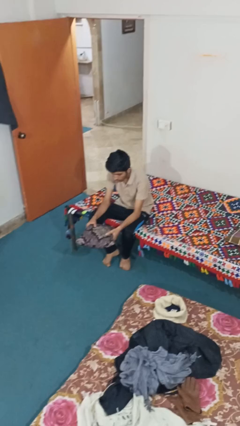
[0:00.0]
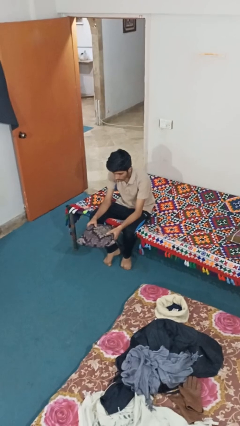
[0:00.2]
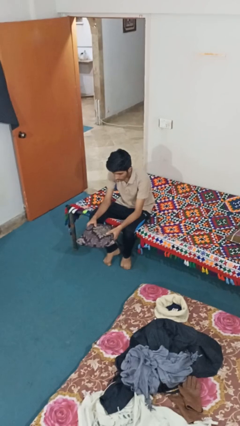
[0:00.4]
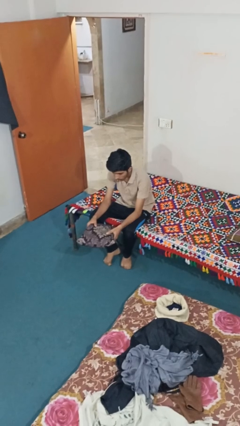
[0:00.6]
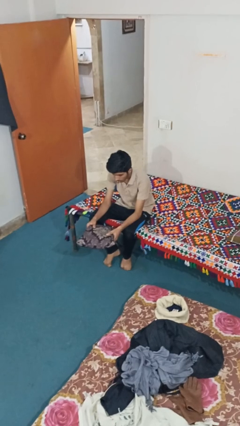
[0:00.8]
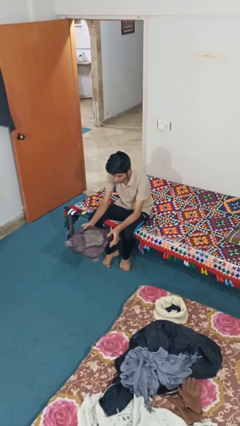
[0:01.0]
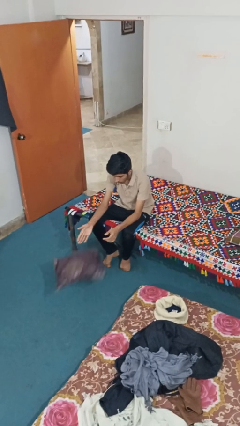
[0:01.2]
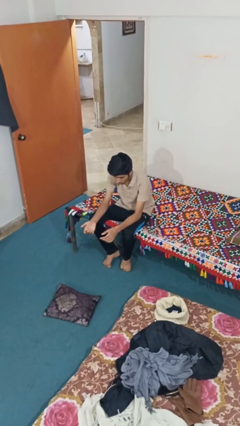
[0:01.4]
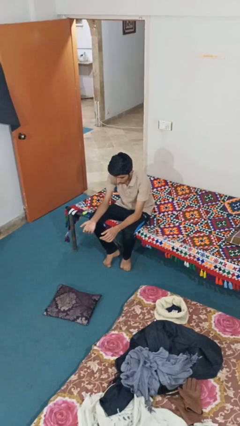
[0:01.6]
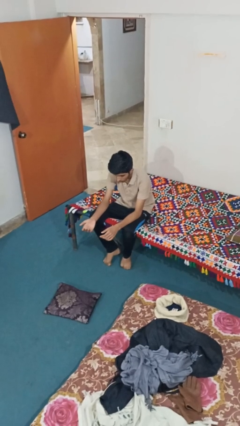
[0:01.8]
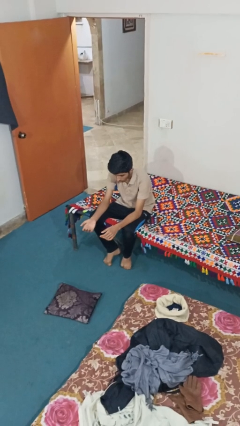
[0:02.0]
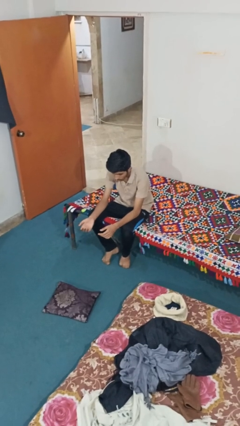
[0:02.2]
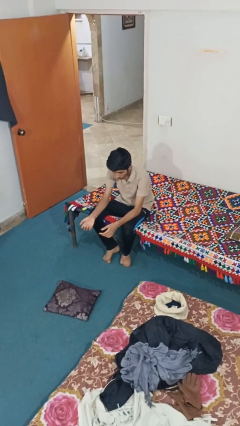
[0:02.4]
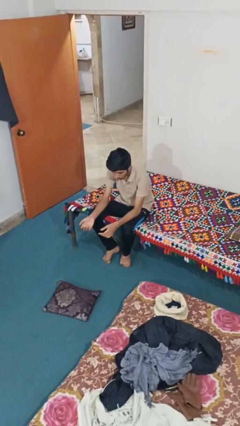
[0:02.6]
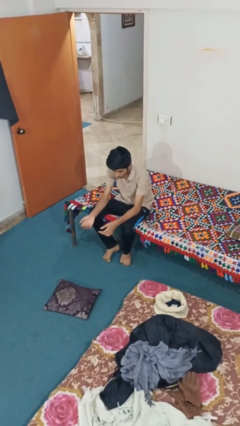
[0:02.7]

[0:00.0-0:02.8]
person drops object

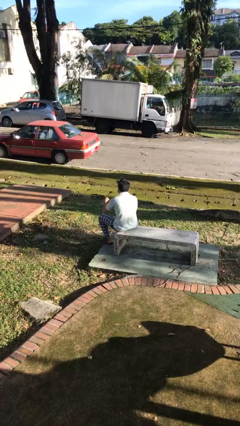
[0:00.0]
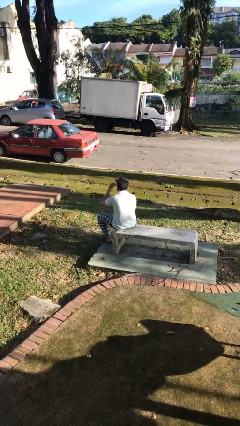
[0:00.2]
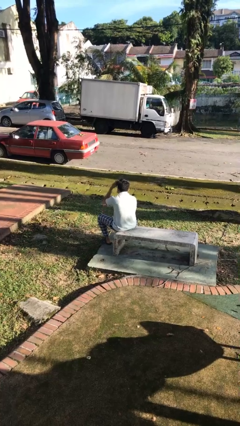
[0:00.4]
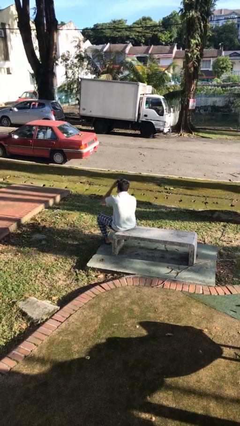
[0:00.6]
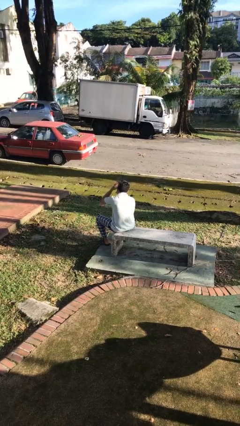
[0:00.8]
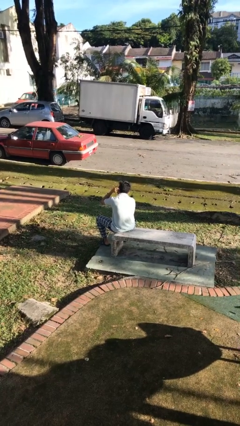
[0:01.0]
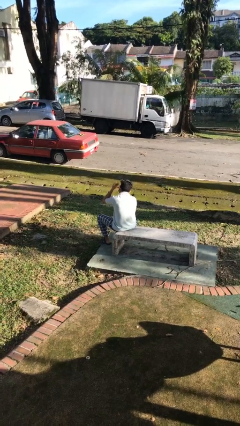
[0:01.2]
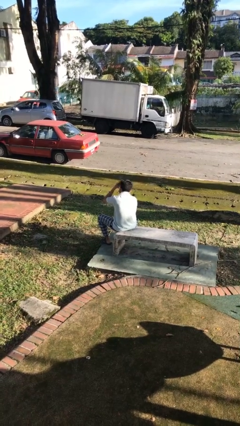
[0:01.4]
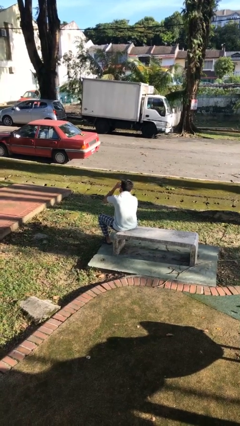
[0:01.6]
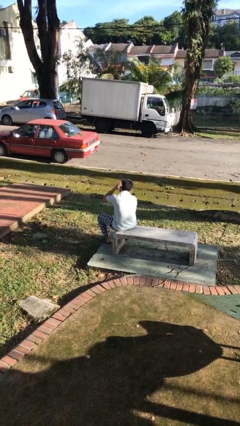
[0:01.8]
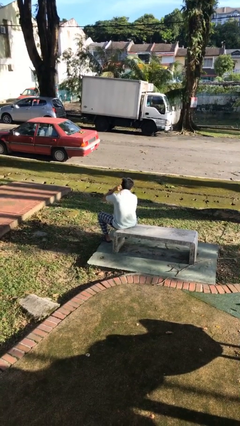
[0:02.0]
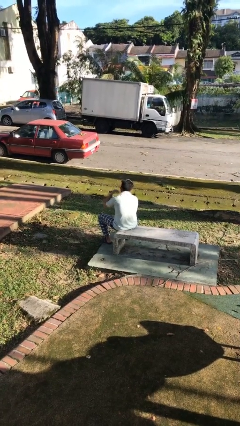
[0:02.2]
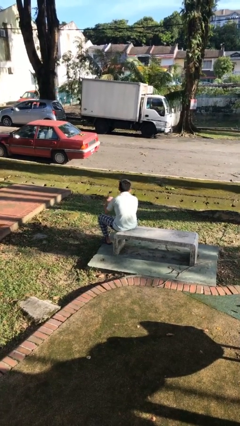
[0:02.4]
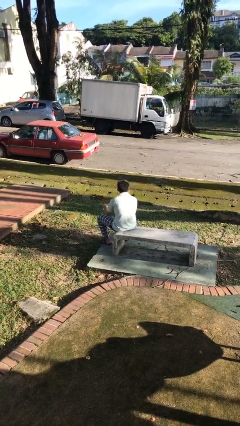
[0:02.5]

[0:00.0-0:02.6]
person strokes hair

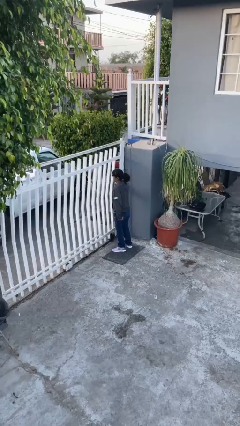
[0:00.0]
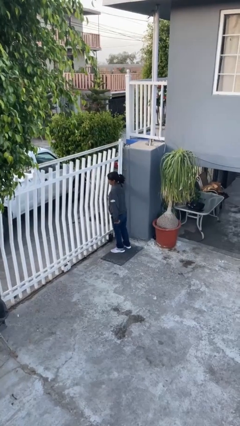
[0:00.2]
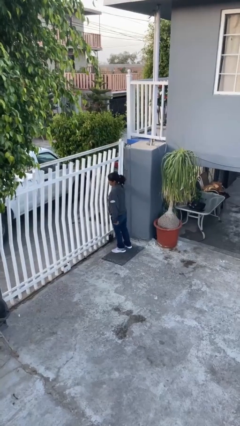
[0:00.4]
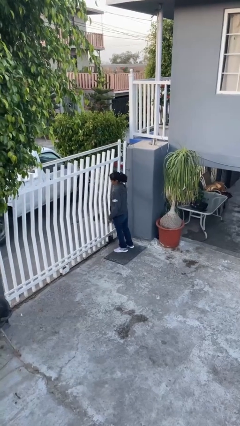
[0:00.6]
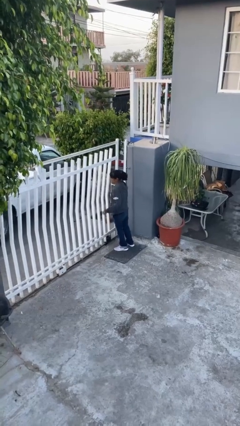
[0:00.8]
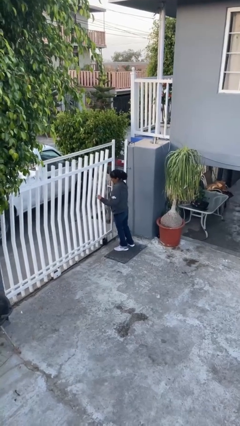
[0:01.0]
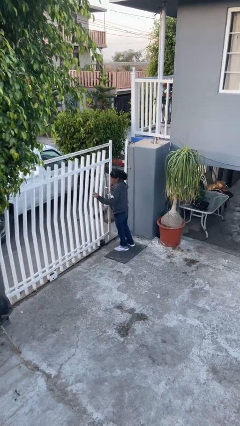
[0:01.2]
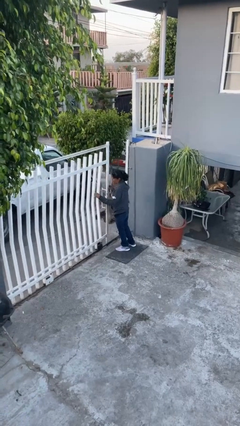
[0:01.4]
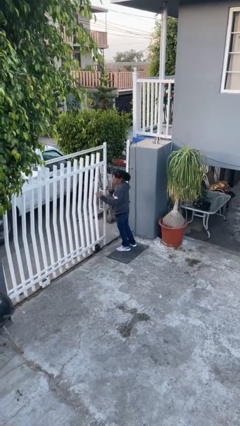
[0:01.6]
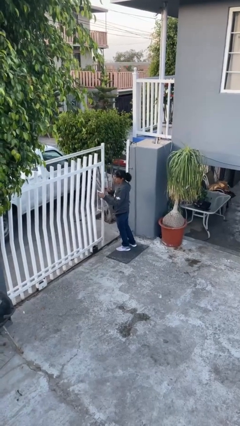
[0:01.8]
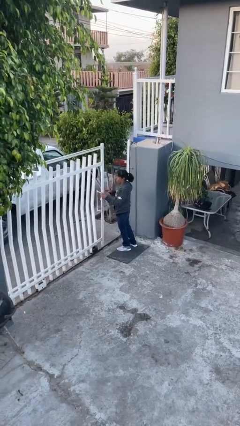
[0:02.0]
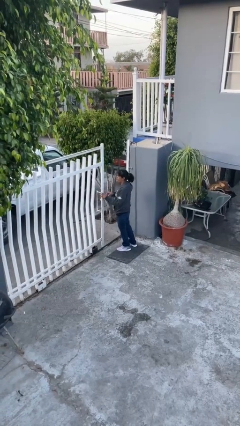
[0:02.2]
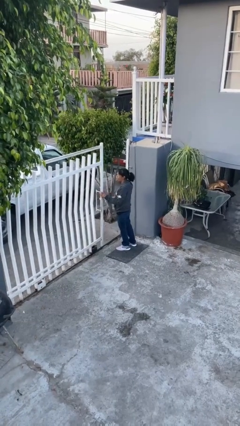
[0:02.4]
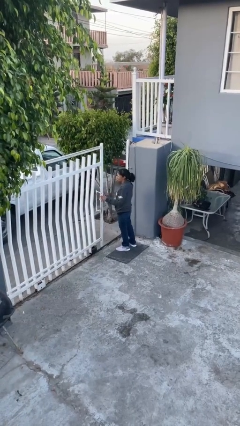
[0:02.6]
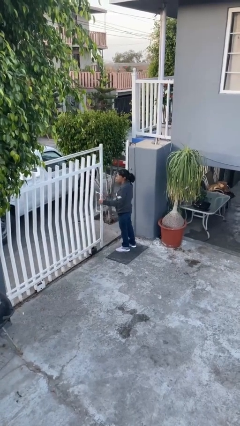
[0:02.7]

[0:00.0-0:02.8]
person closes facility door

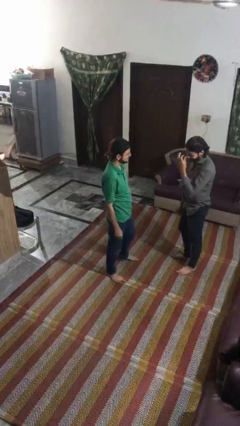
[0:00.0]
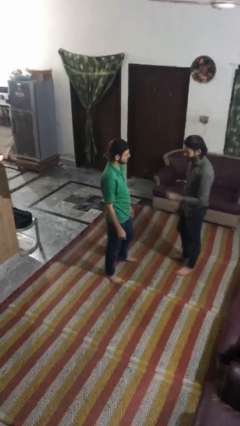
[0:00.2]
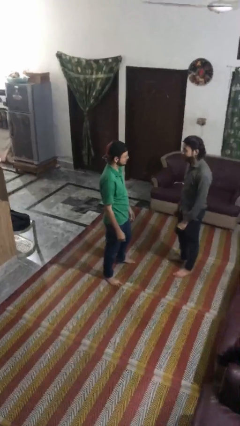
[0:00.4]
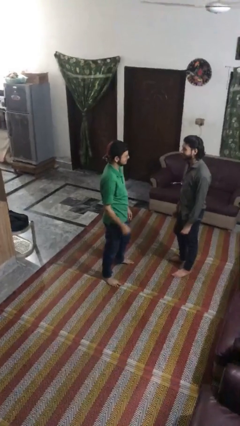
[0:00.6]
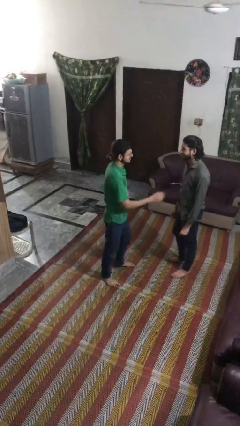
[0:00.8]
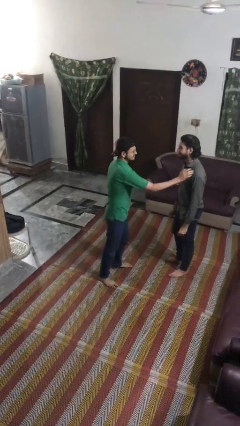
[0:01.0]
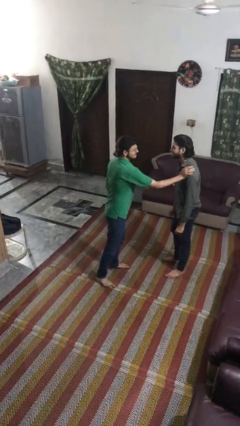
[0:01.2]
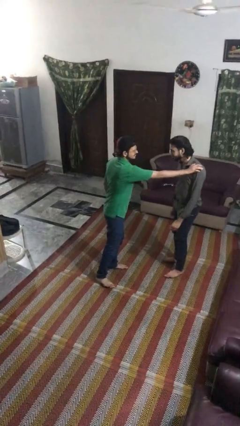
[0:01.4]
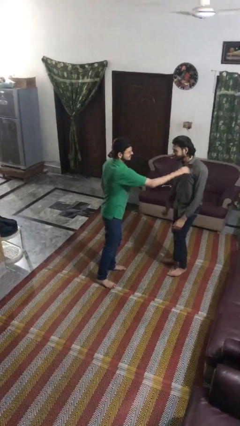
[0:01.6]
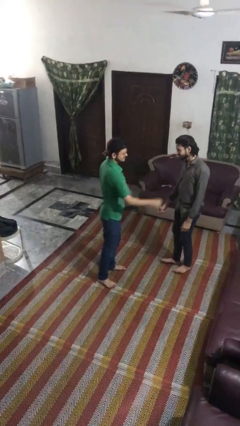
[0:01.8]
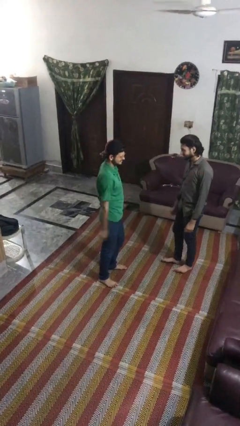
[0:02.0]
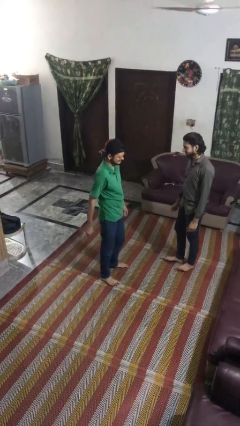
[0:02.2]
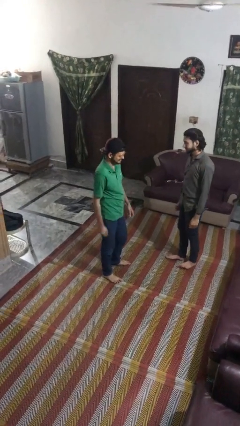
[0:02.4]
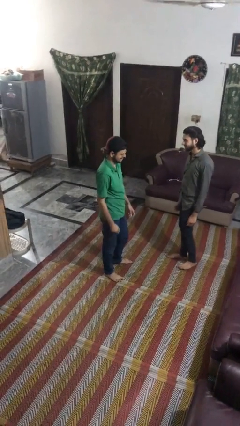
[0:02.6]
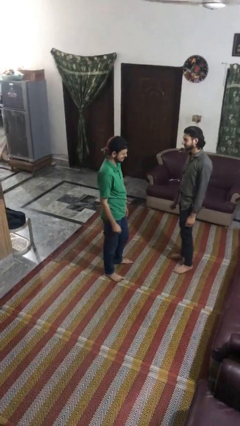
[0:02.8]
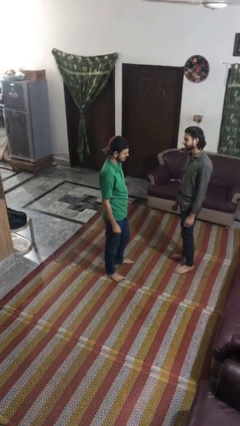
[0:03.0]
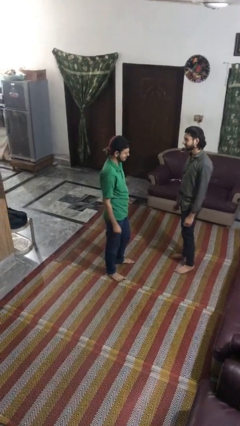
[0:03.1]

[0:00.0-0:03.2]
person shoves person

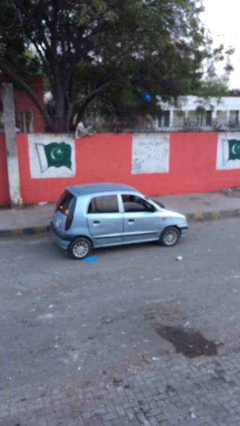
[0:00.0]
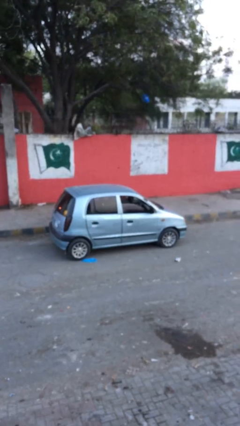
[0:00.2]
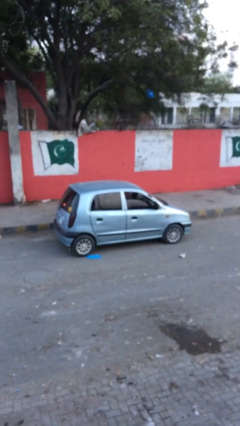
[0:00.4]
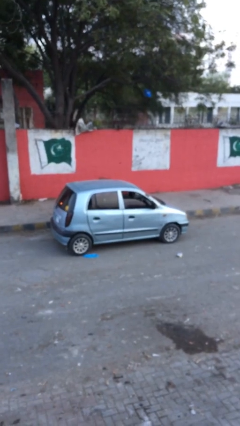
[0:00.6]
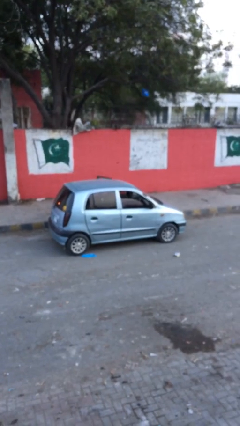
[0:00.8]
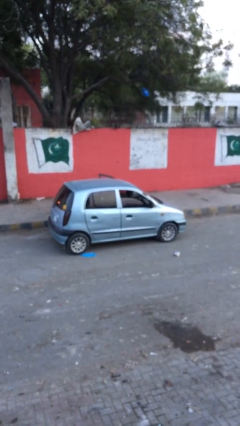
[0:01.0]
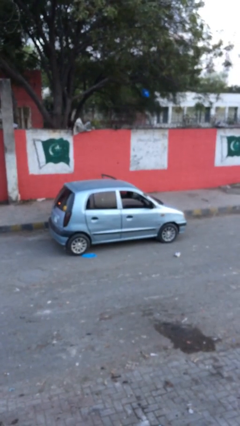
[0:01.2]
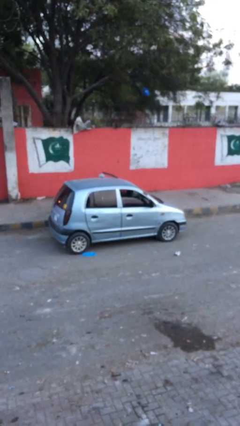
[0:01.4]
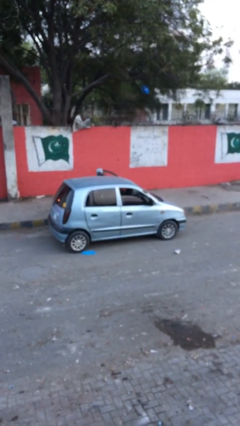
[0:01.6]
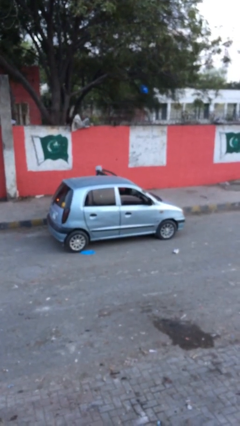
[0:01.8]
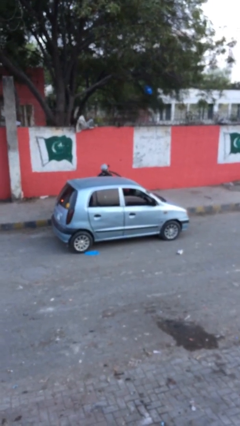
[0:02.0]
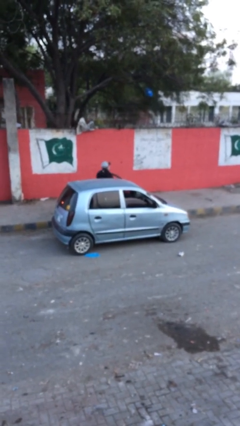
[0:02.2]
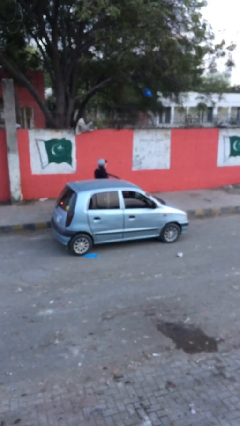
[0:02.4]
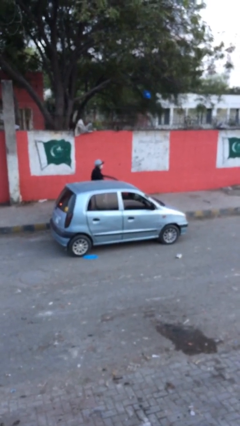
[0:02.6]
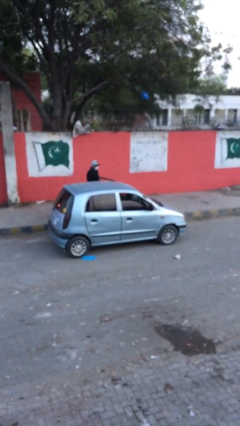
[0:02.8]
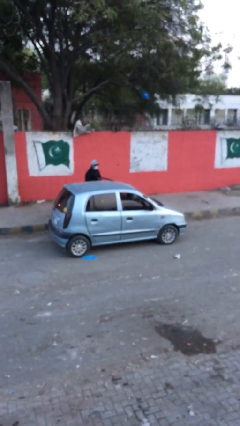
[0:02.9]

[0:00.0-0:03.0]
car drops off person

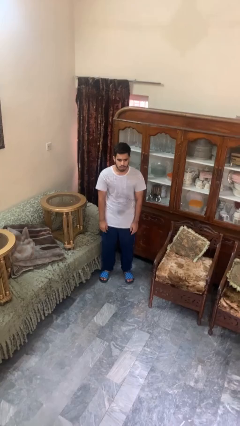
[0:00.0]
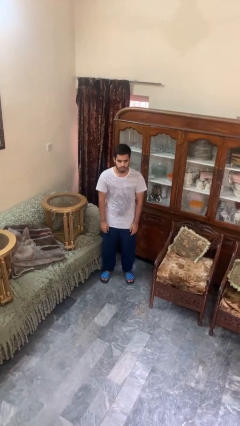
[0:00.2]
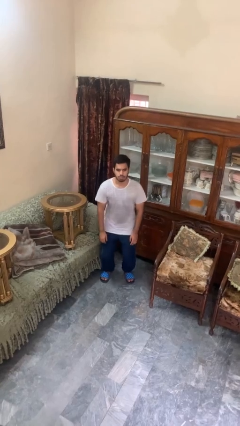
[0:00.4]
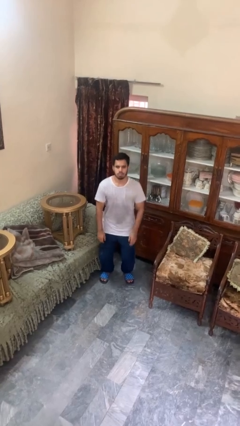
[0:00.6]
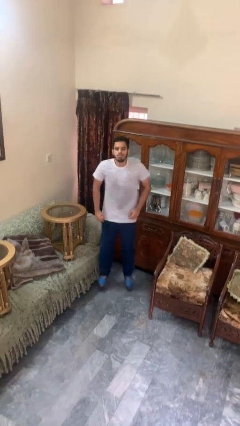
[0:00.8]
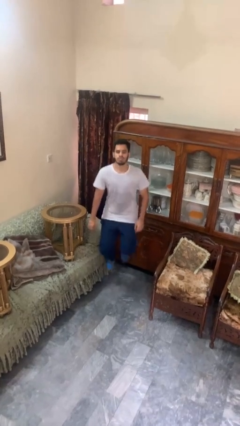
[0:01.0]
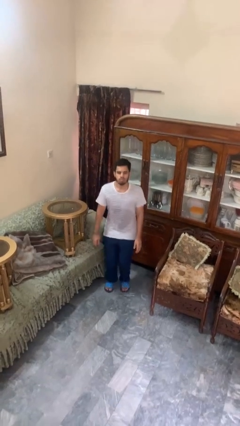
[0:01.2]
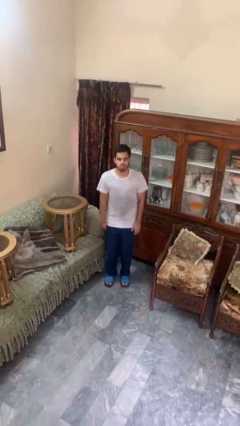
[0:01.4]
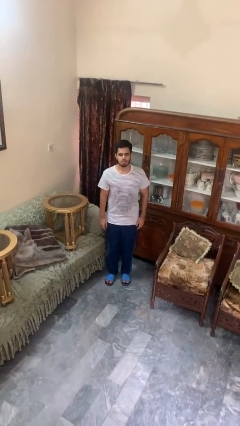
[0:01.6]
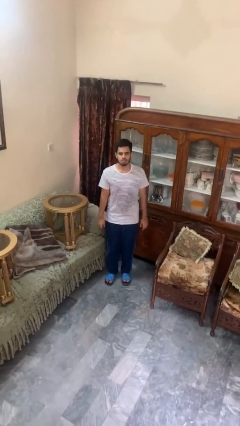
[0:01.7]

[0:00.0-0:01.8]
person jumps

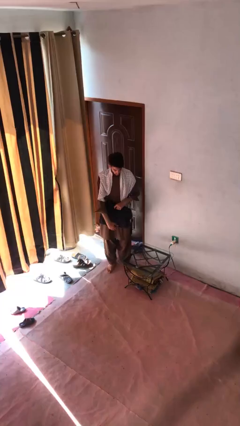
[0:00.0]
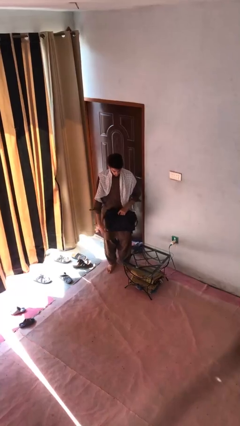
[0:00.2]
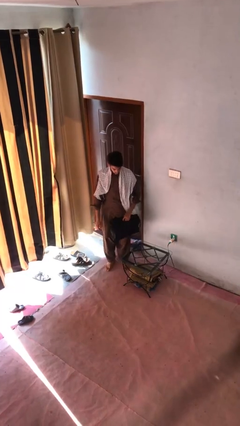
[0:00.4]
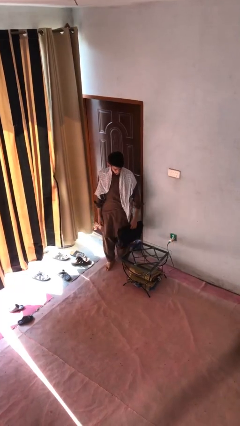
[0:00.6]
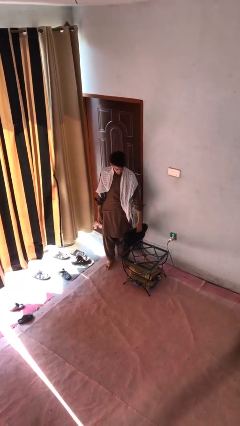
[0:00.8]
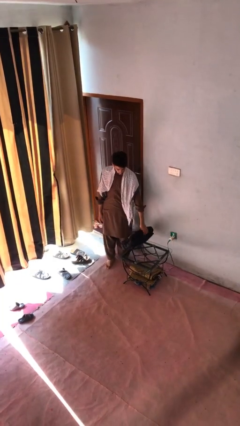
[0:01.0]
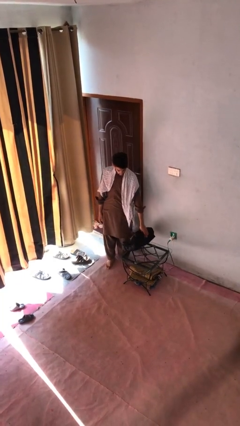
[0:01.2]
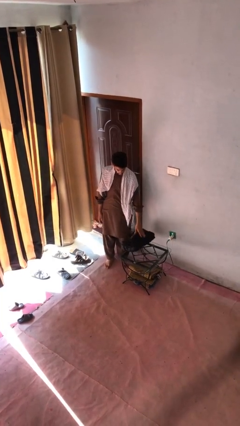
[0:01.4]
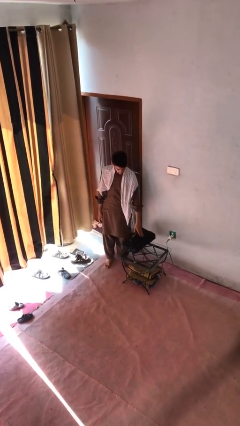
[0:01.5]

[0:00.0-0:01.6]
person puts down object on table
